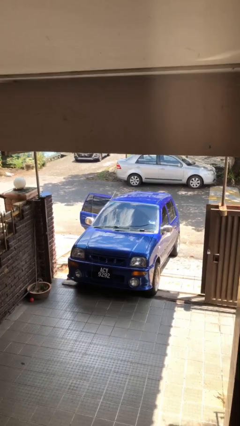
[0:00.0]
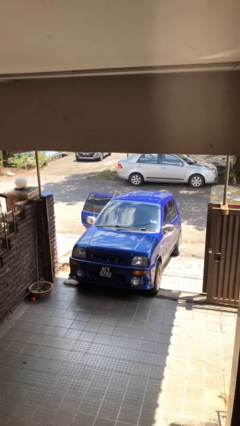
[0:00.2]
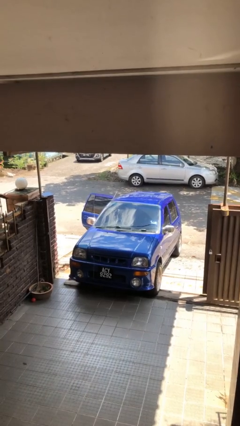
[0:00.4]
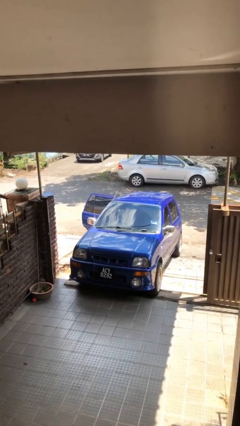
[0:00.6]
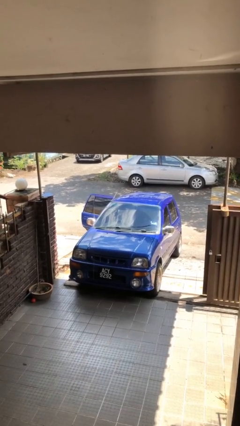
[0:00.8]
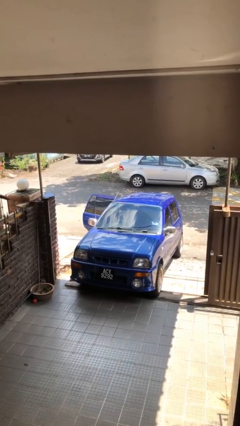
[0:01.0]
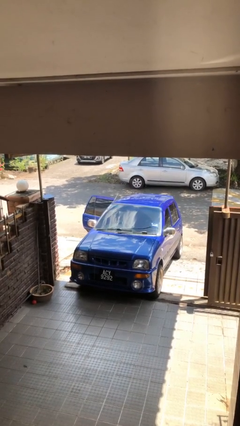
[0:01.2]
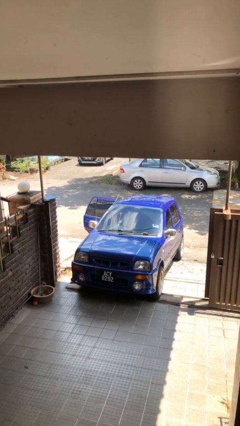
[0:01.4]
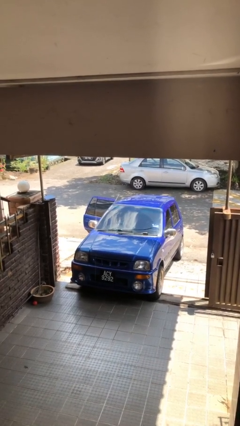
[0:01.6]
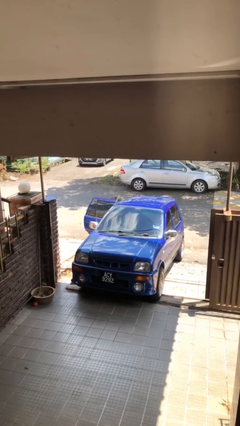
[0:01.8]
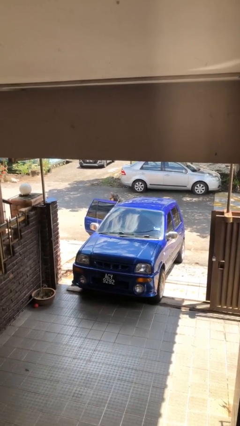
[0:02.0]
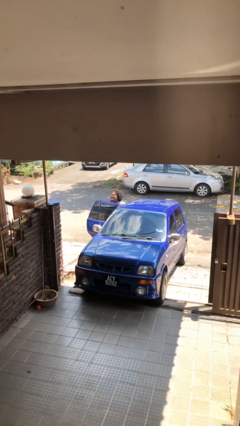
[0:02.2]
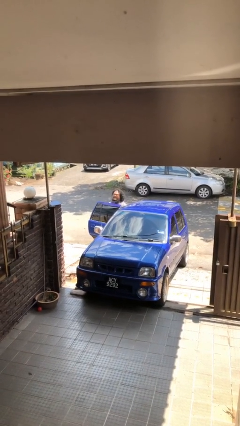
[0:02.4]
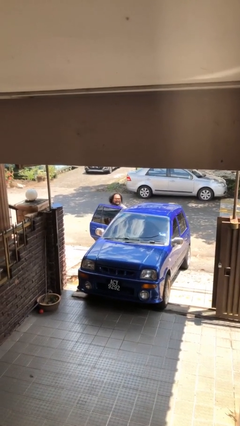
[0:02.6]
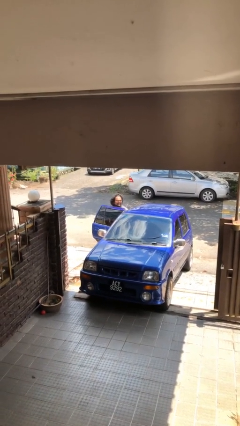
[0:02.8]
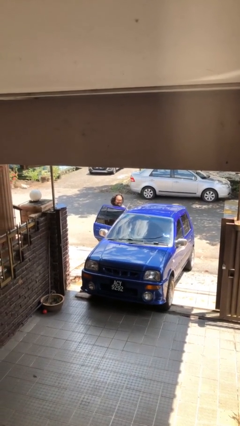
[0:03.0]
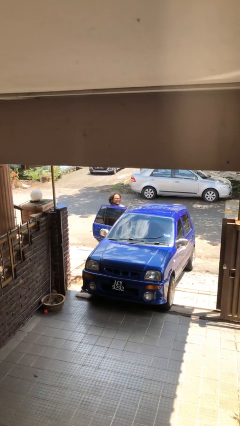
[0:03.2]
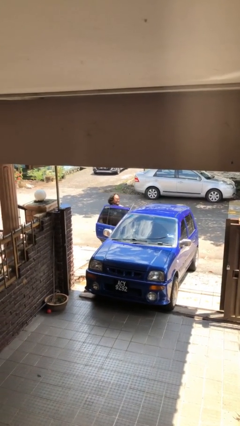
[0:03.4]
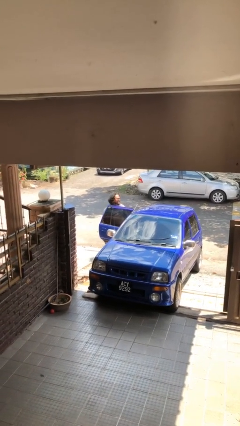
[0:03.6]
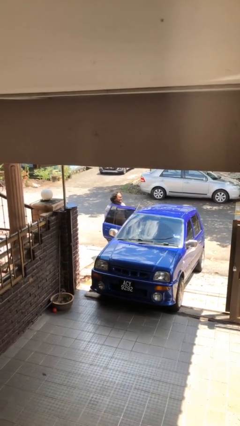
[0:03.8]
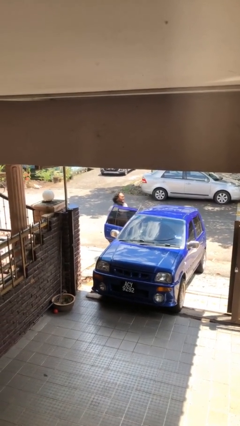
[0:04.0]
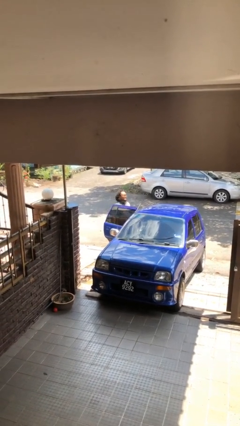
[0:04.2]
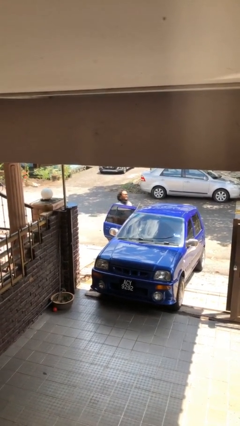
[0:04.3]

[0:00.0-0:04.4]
person exits car

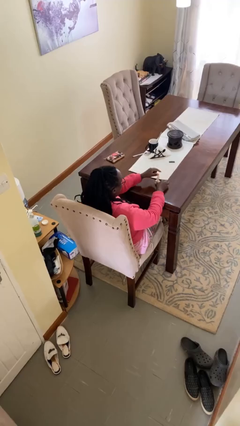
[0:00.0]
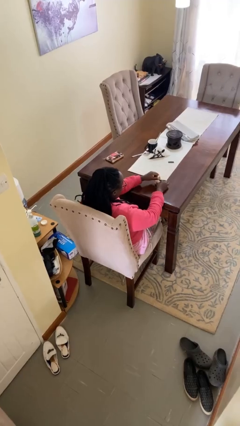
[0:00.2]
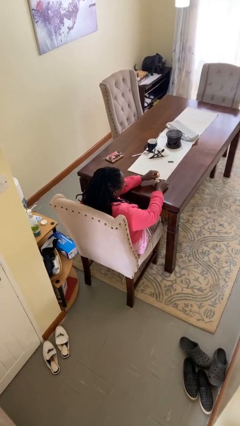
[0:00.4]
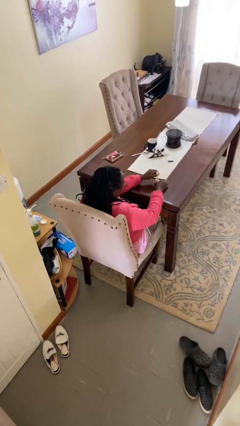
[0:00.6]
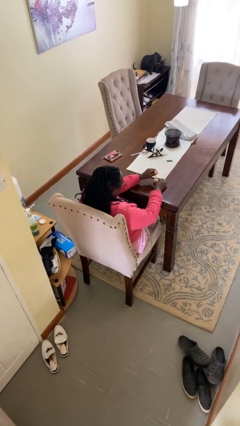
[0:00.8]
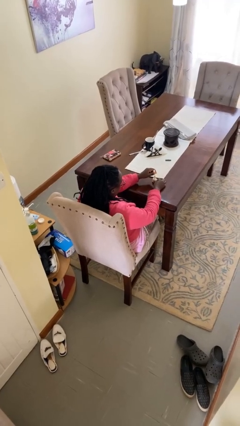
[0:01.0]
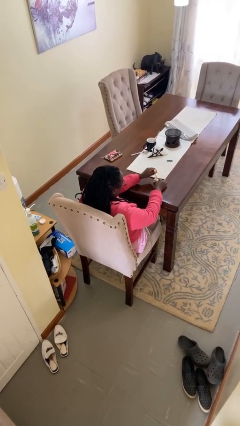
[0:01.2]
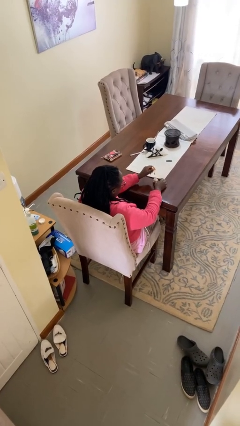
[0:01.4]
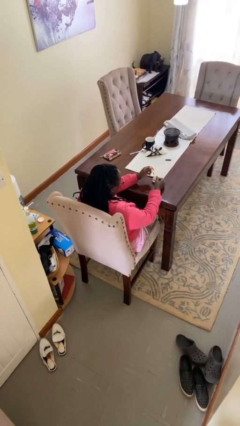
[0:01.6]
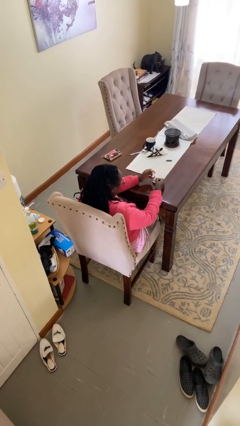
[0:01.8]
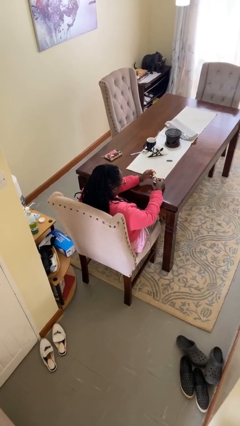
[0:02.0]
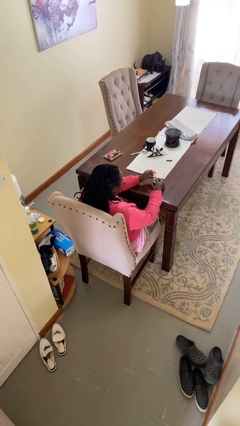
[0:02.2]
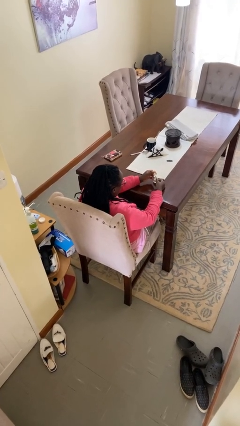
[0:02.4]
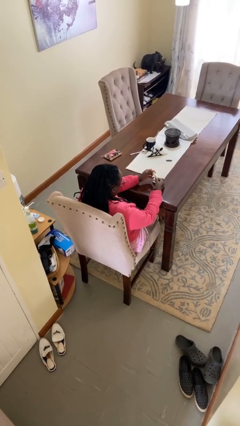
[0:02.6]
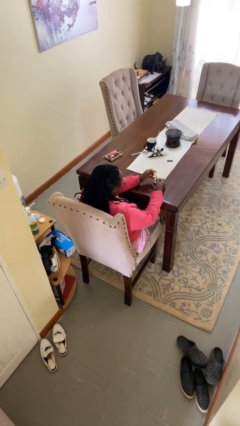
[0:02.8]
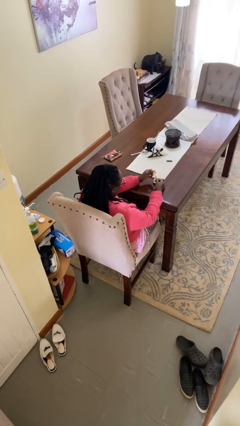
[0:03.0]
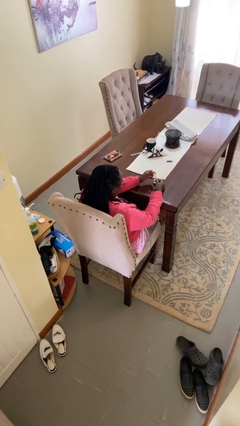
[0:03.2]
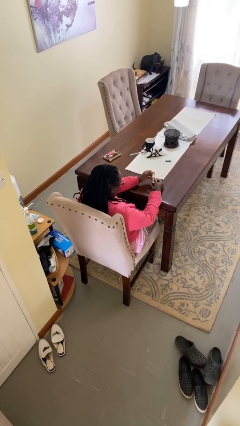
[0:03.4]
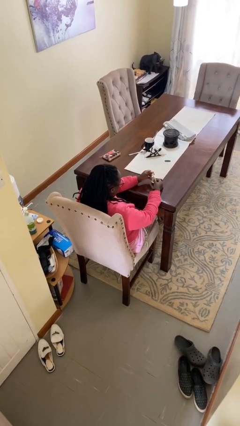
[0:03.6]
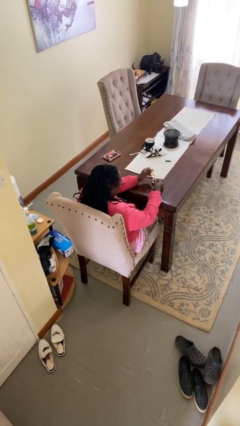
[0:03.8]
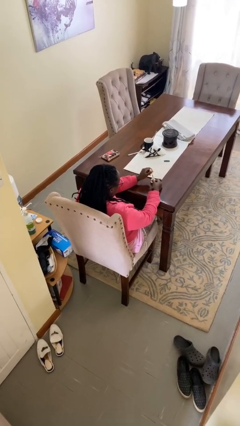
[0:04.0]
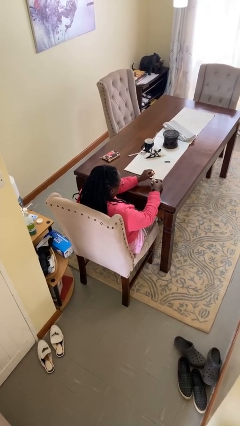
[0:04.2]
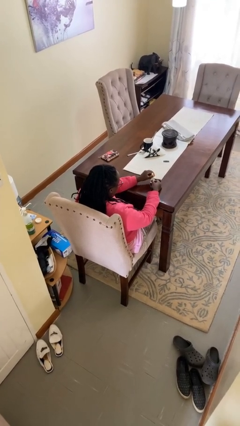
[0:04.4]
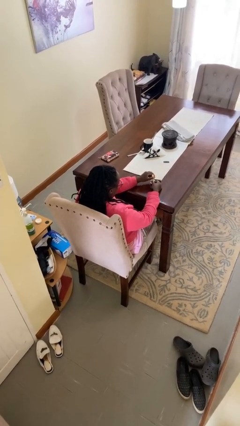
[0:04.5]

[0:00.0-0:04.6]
person paints fingernails

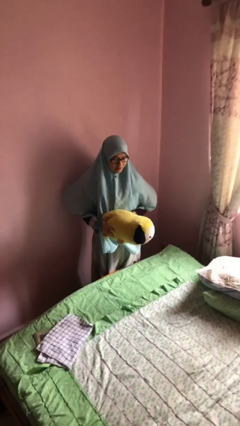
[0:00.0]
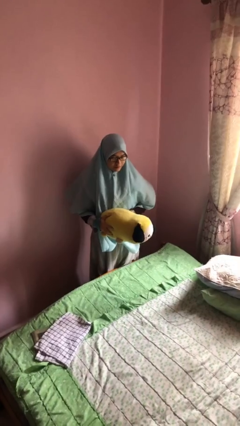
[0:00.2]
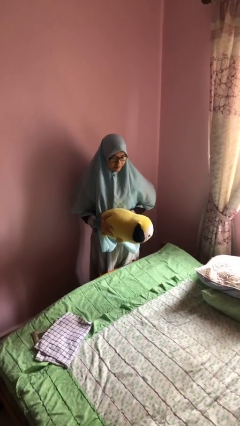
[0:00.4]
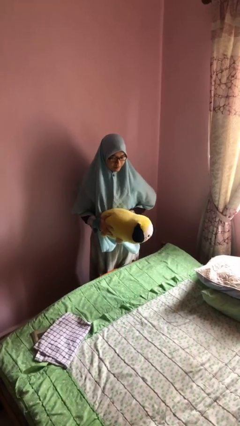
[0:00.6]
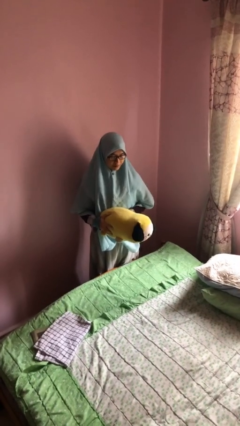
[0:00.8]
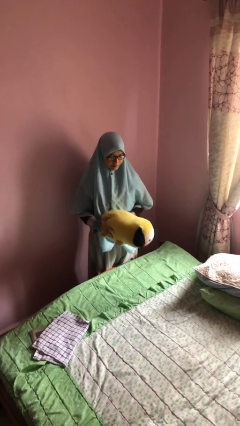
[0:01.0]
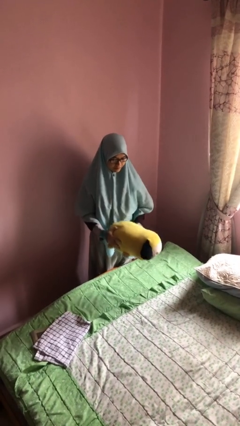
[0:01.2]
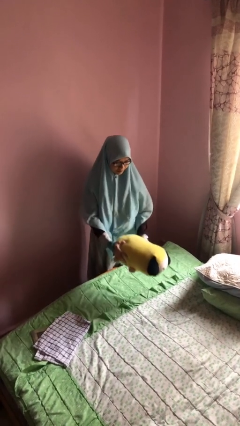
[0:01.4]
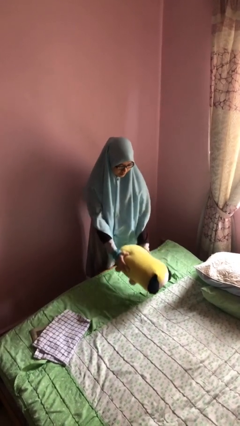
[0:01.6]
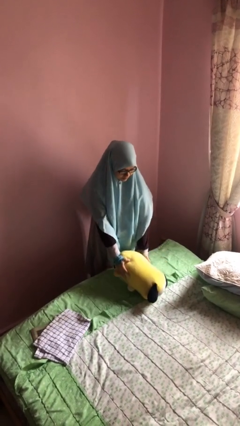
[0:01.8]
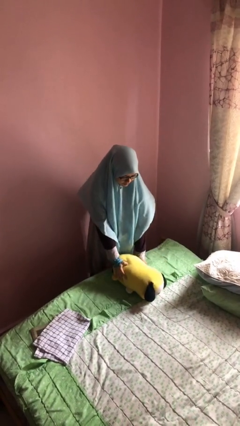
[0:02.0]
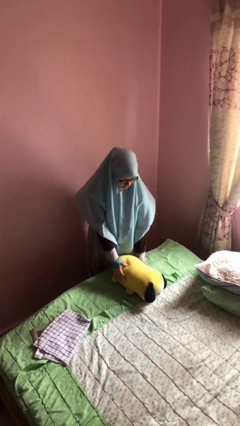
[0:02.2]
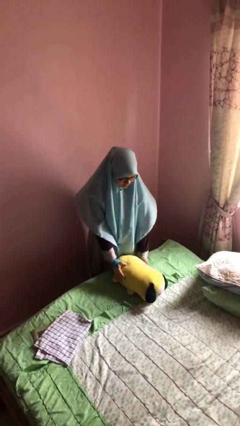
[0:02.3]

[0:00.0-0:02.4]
person puts down object on bed

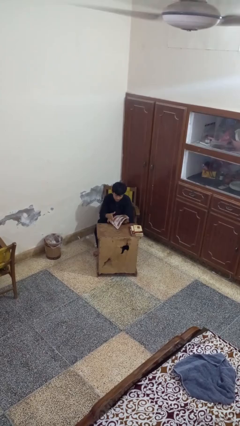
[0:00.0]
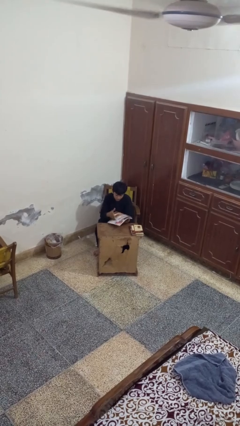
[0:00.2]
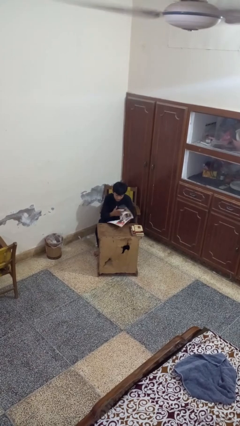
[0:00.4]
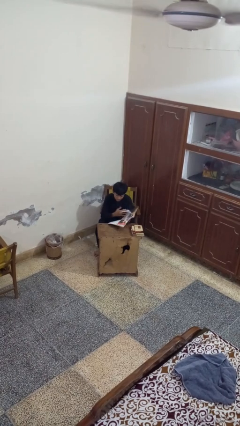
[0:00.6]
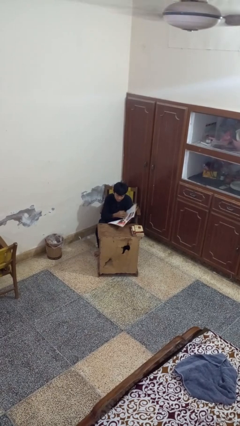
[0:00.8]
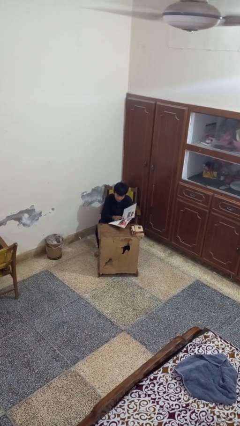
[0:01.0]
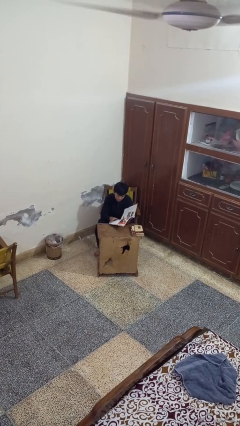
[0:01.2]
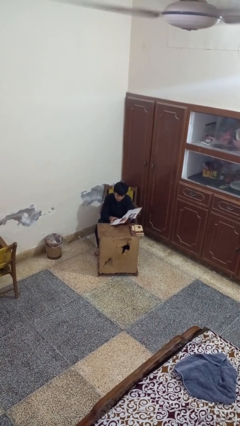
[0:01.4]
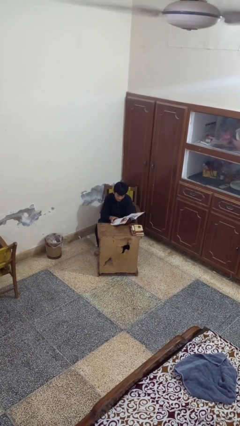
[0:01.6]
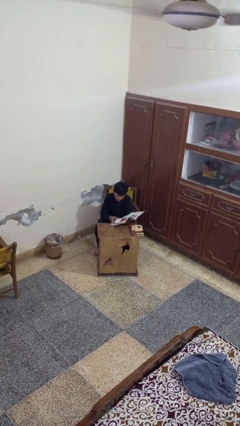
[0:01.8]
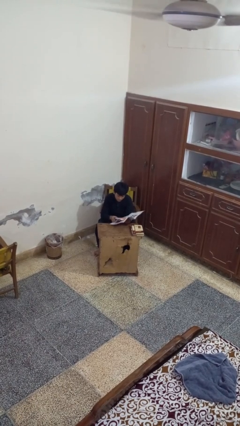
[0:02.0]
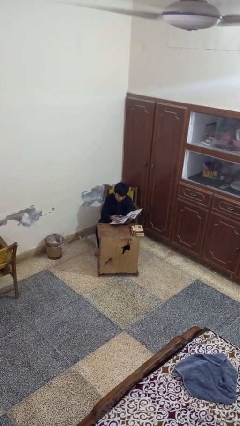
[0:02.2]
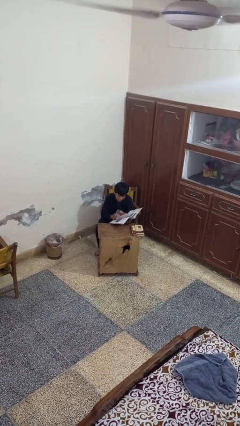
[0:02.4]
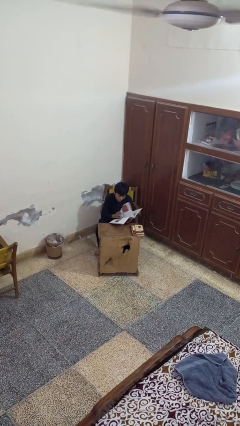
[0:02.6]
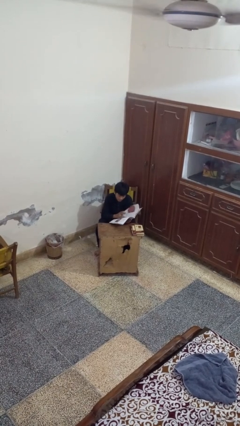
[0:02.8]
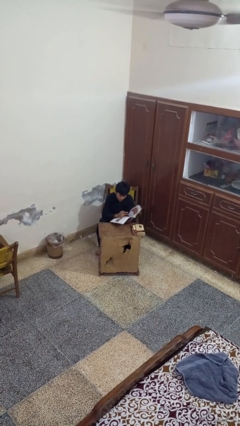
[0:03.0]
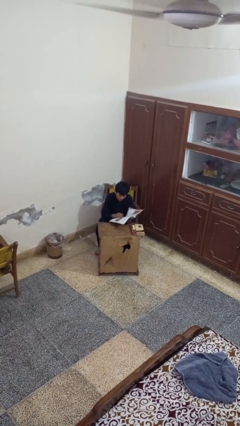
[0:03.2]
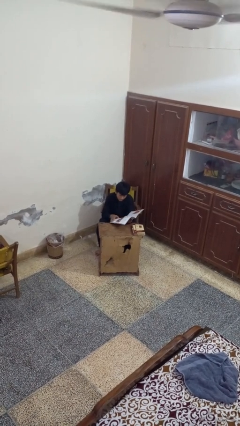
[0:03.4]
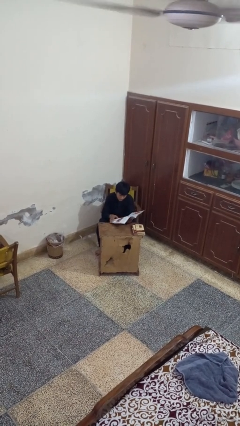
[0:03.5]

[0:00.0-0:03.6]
person reads magazine

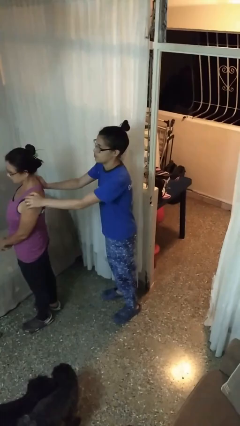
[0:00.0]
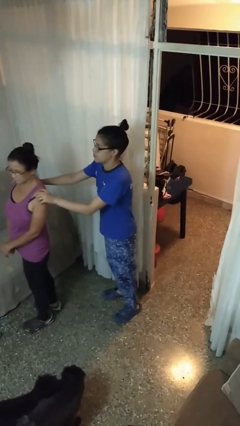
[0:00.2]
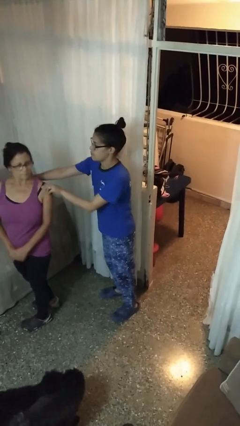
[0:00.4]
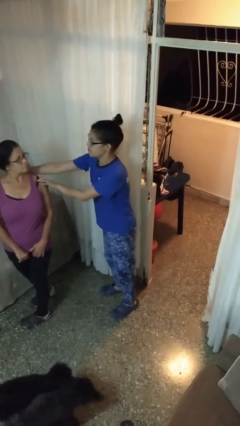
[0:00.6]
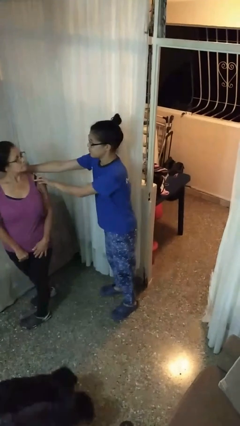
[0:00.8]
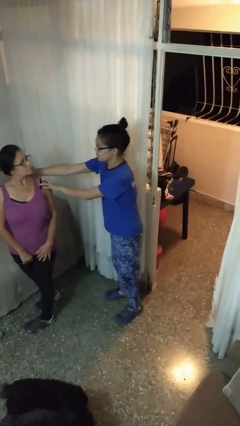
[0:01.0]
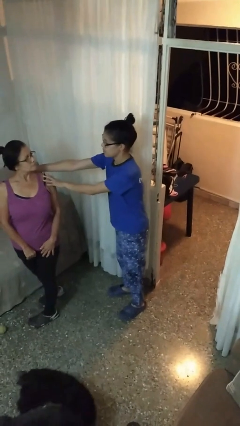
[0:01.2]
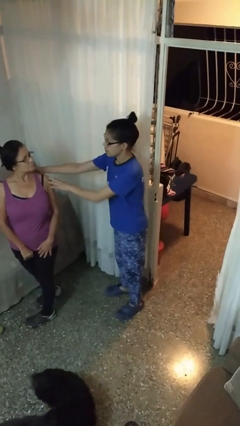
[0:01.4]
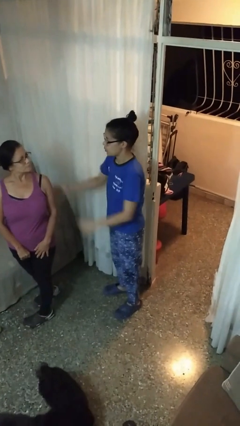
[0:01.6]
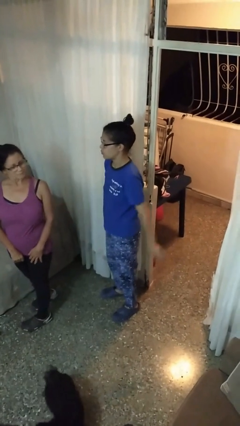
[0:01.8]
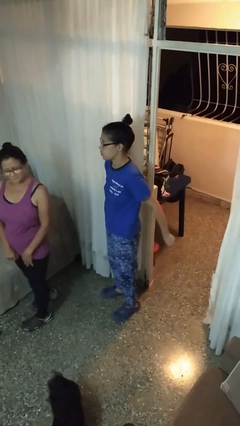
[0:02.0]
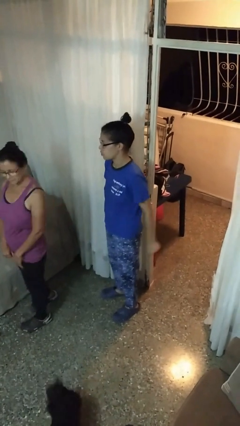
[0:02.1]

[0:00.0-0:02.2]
person spins person around

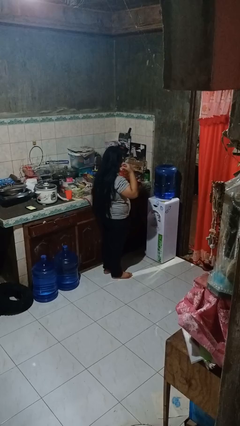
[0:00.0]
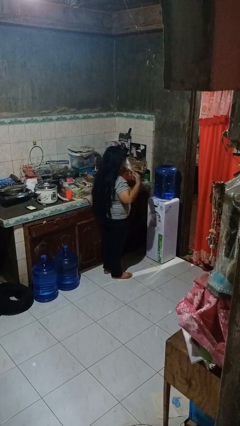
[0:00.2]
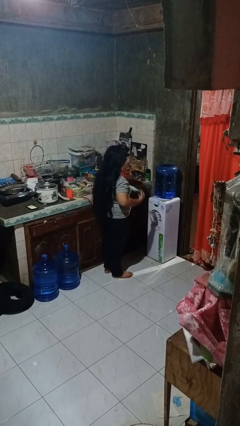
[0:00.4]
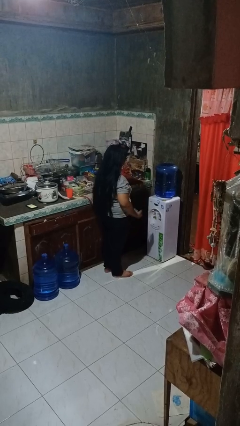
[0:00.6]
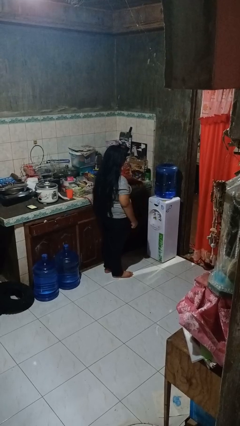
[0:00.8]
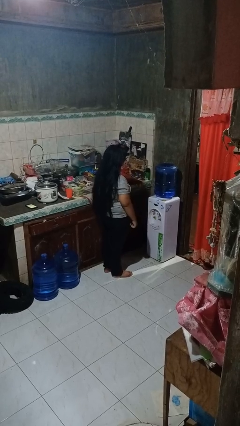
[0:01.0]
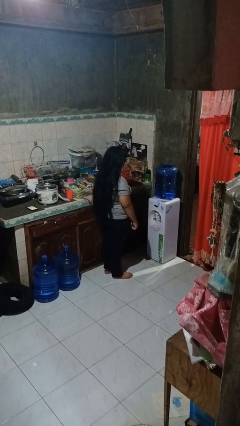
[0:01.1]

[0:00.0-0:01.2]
person takes off facemask
